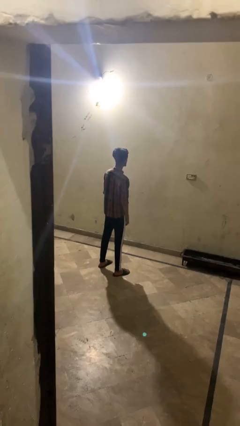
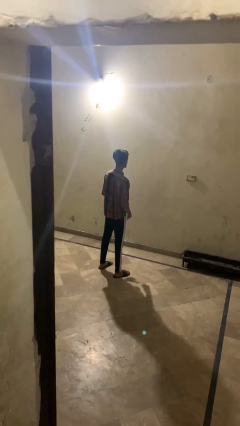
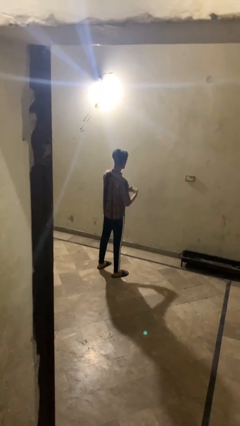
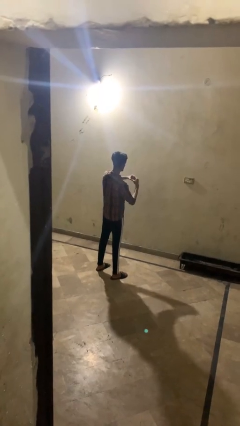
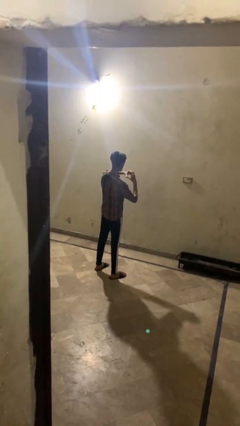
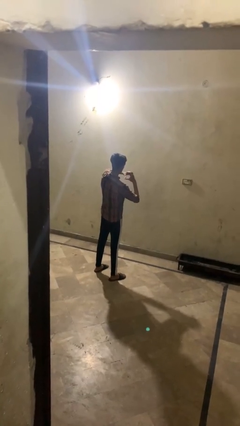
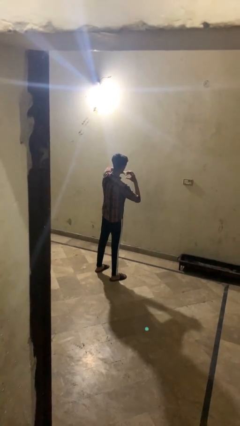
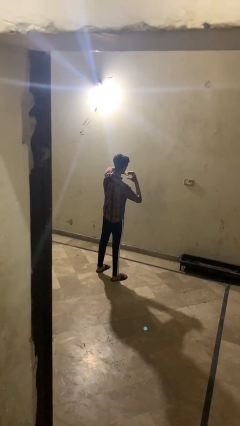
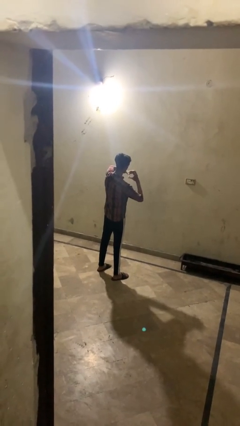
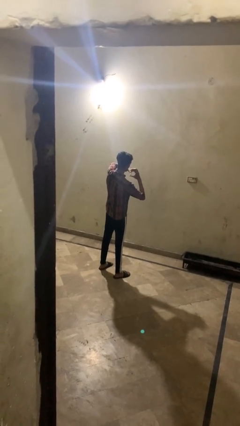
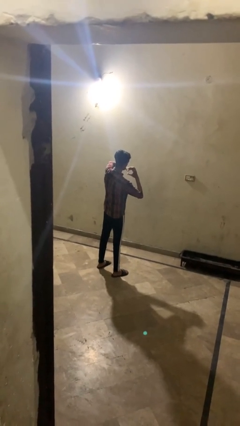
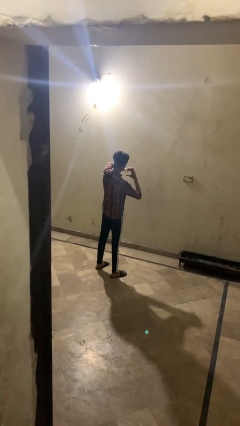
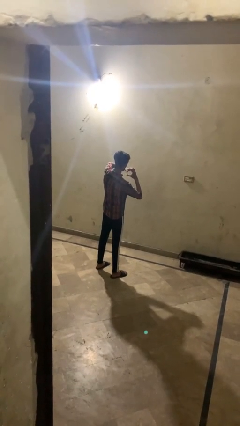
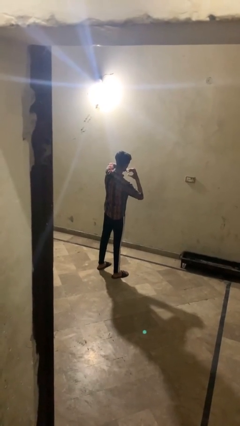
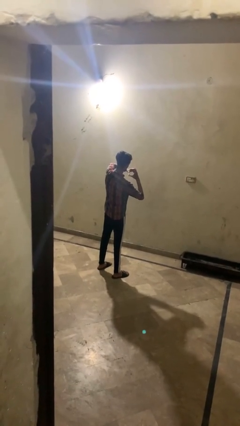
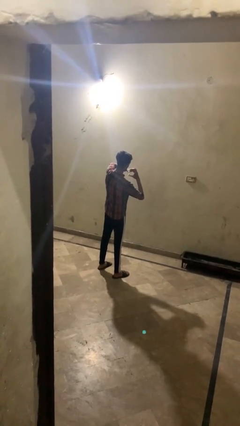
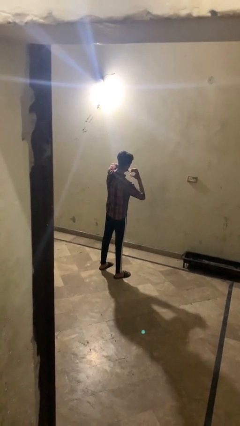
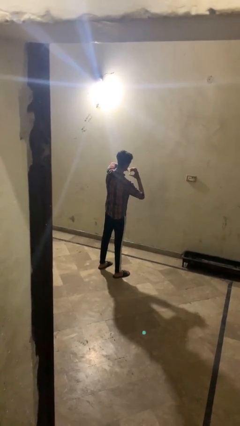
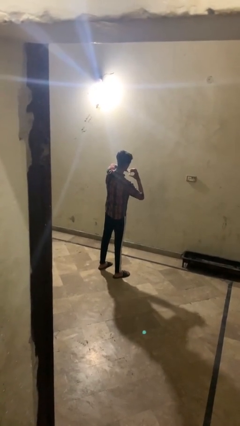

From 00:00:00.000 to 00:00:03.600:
person gestures heart

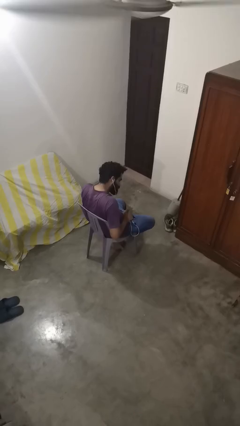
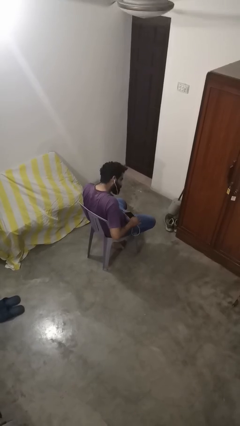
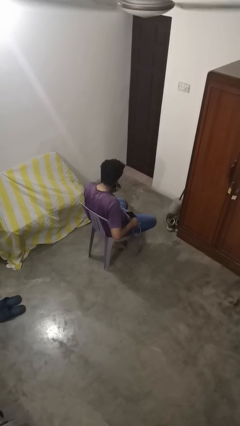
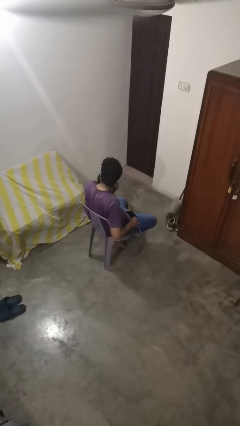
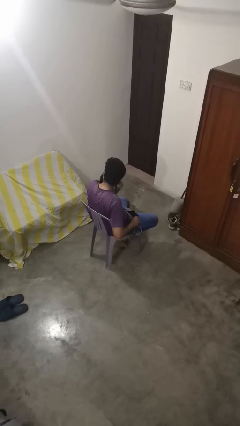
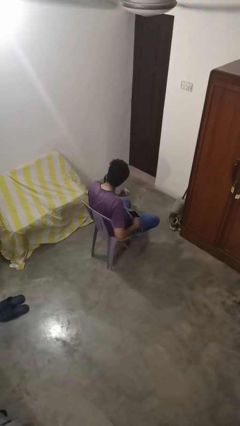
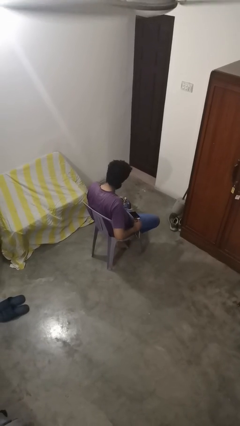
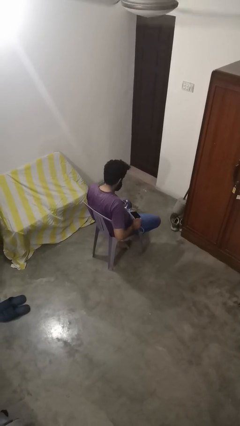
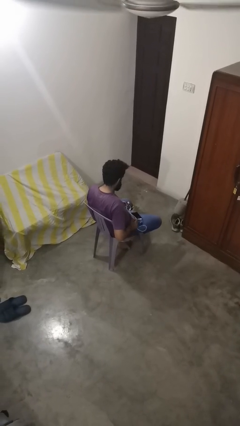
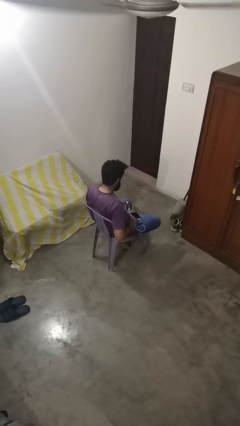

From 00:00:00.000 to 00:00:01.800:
person takes off headphones

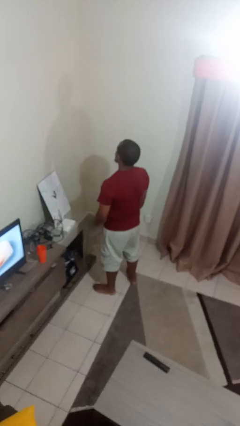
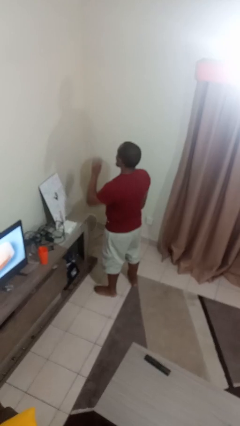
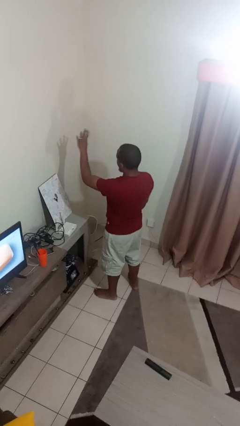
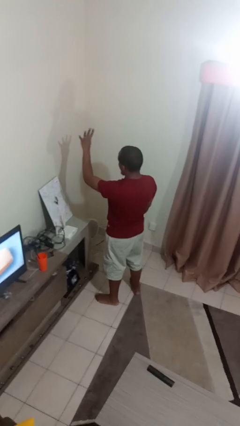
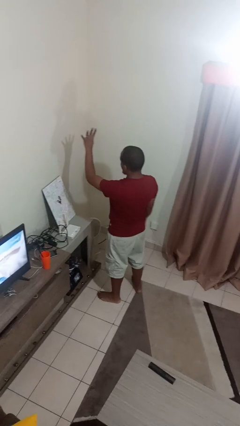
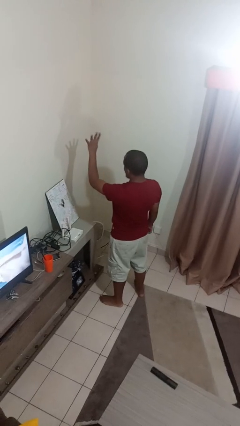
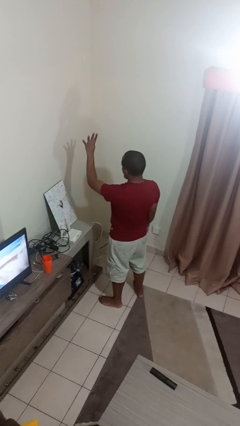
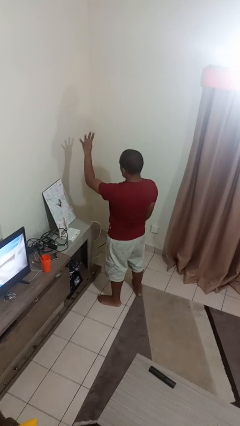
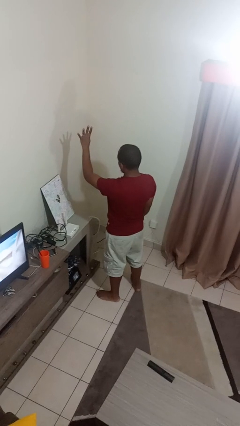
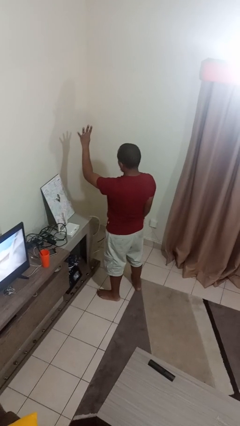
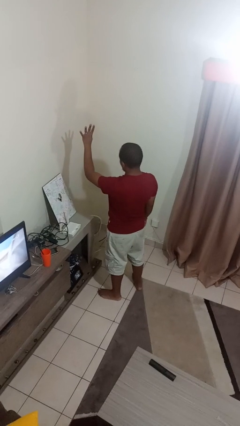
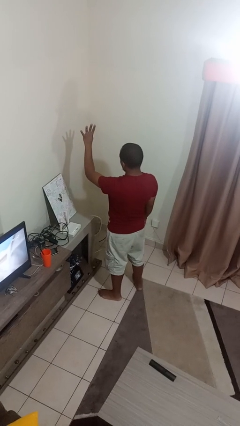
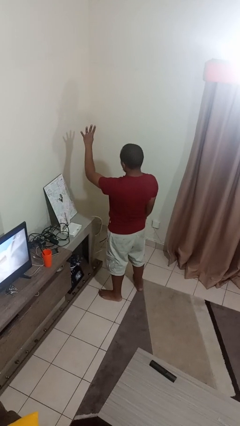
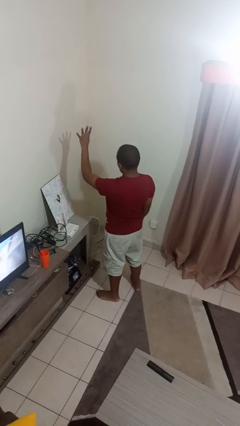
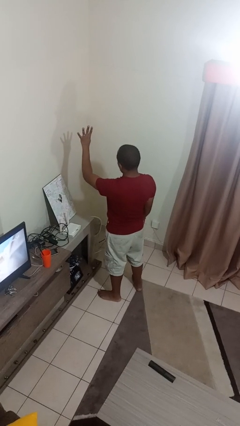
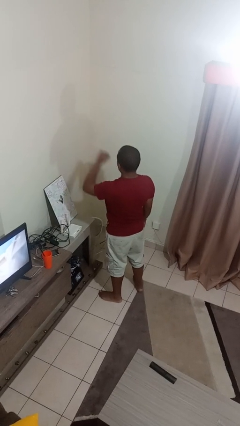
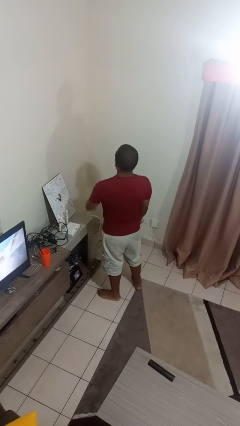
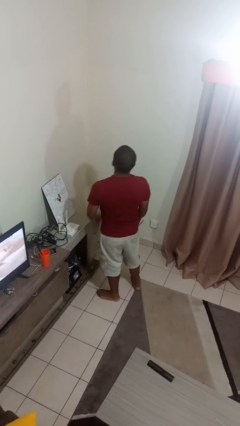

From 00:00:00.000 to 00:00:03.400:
person gestures number four

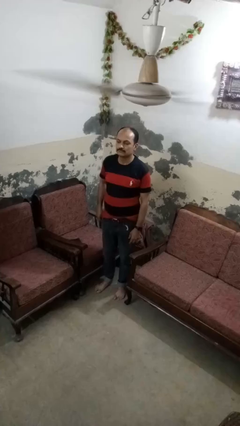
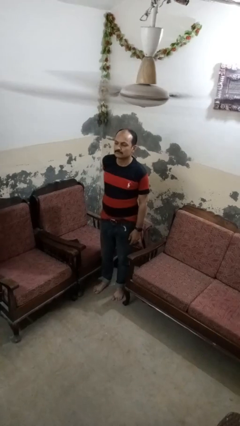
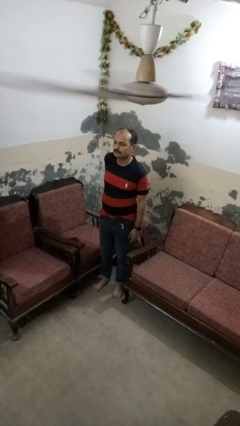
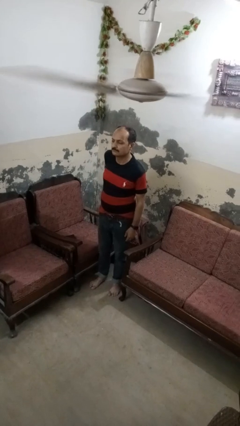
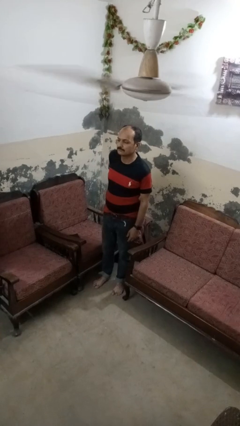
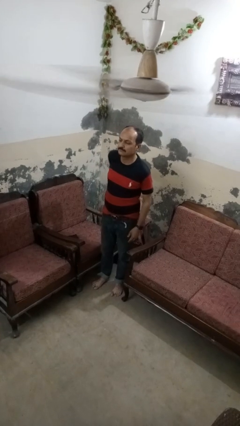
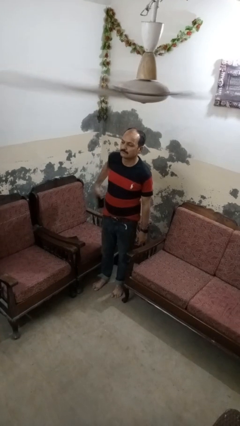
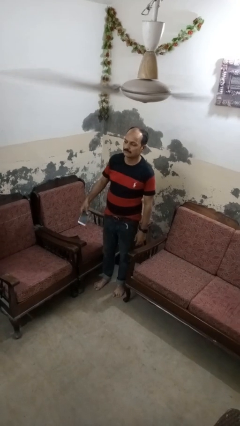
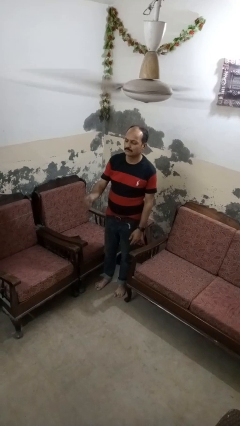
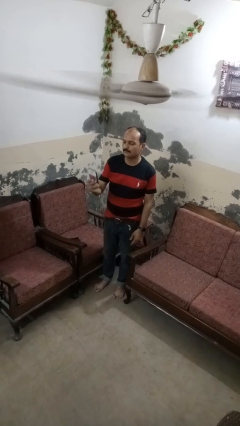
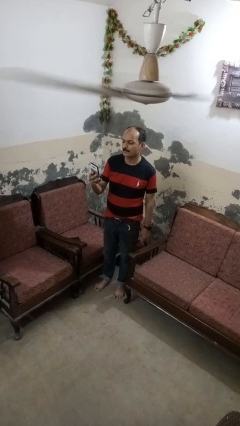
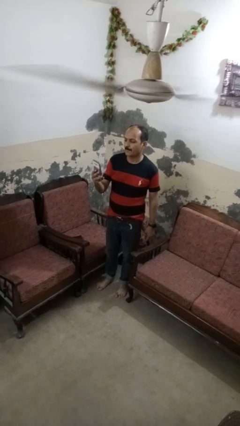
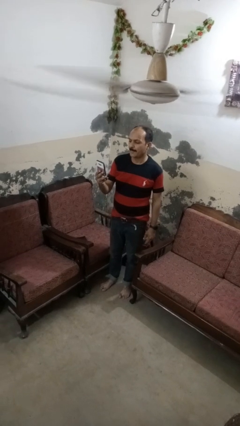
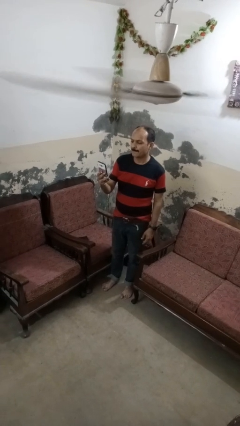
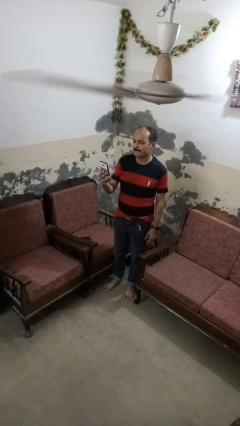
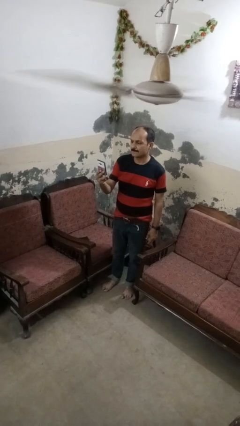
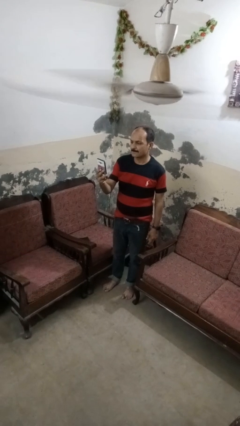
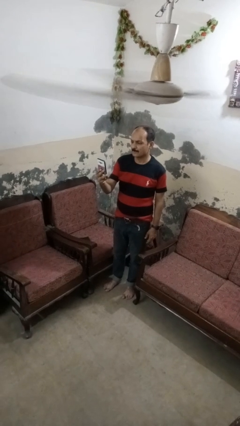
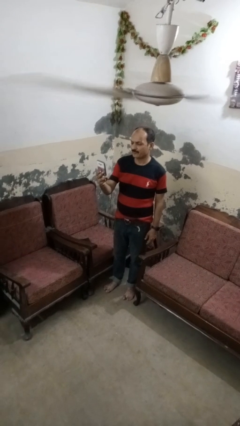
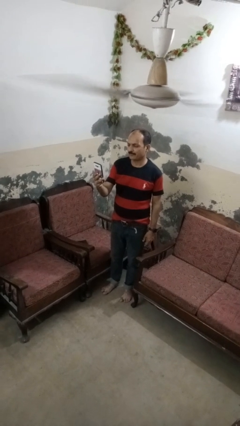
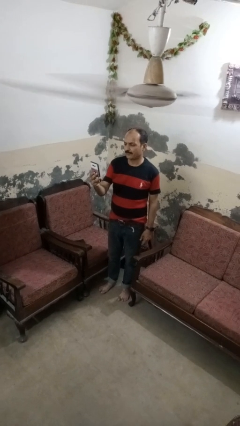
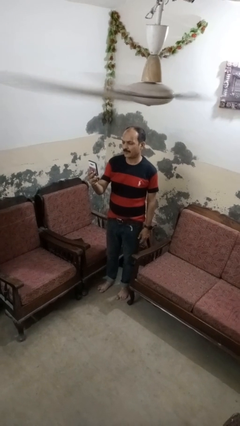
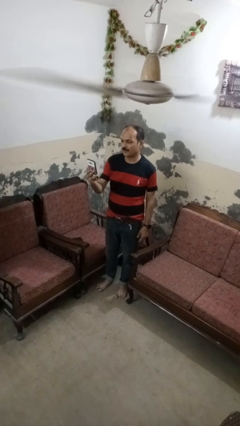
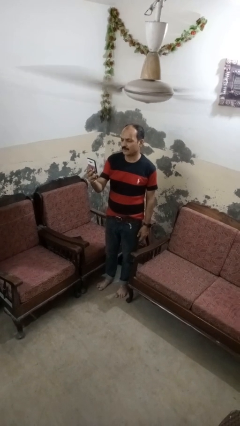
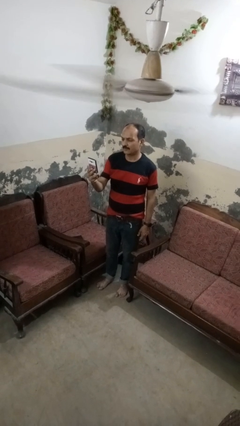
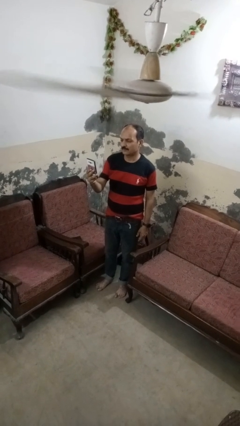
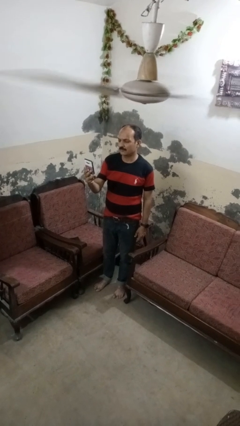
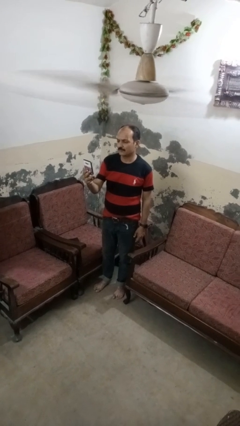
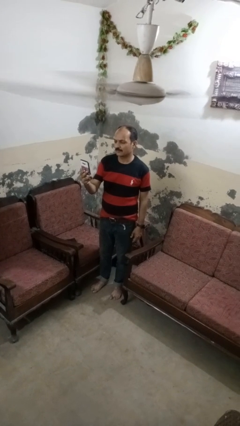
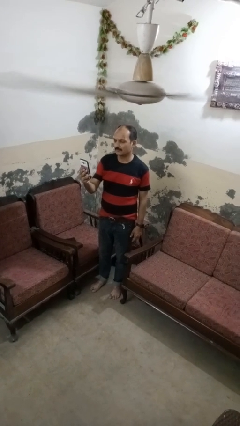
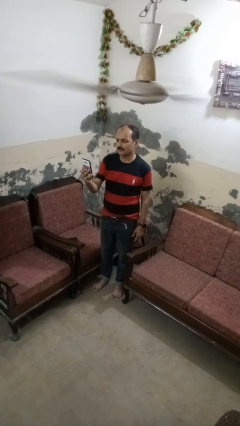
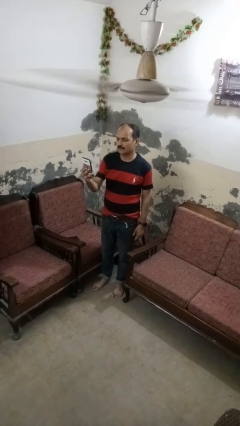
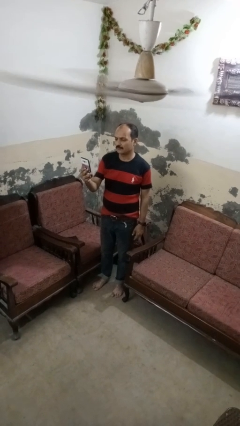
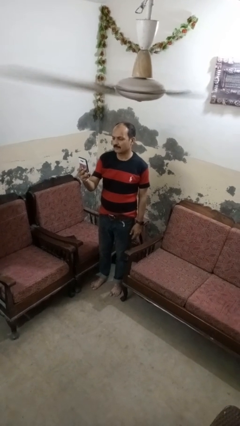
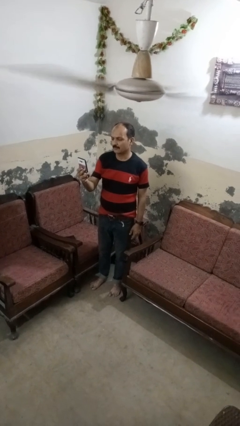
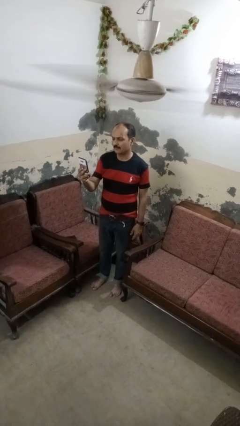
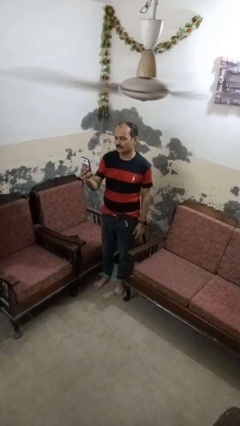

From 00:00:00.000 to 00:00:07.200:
person takes phone from pocket

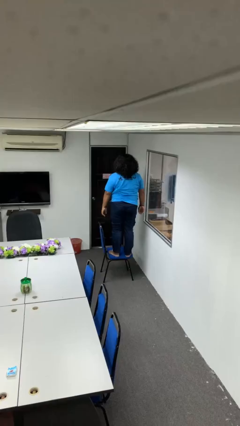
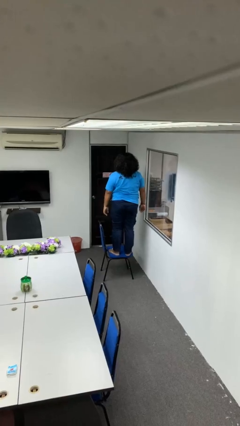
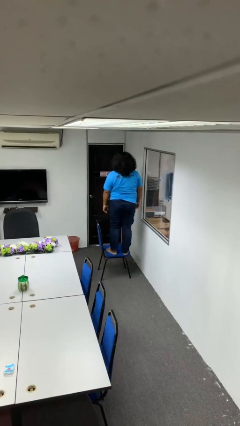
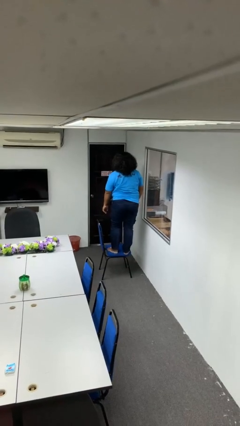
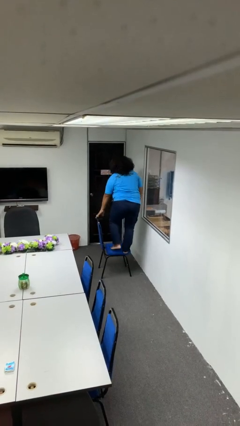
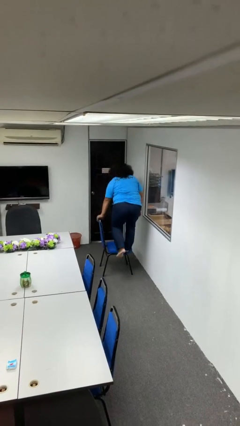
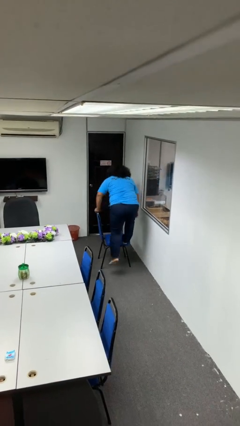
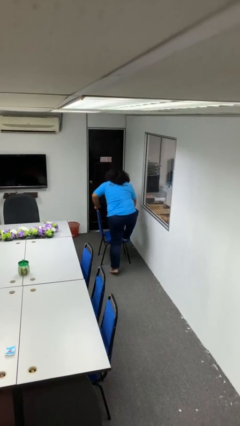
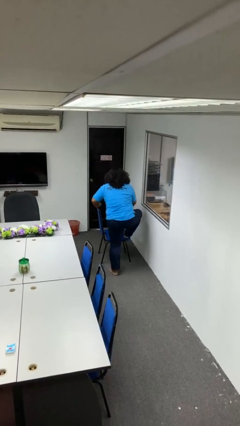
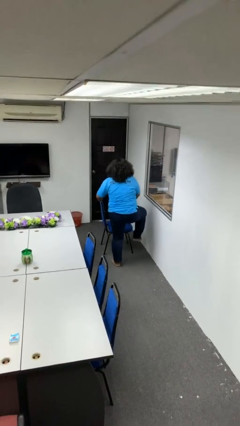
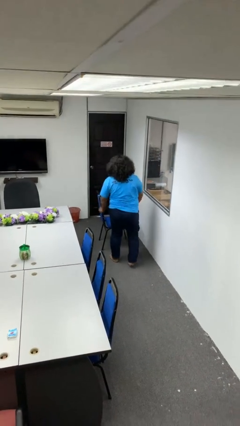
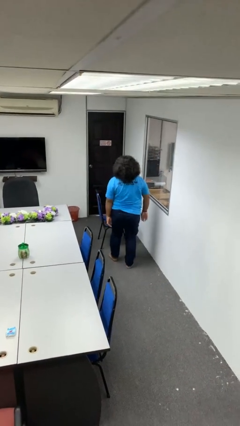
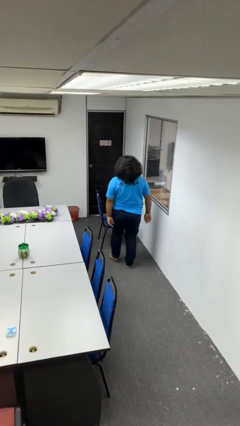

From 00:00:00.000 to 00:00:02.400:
person climbs off chair
